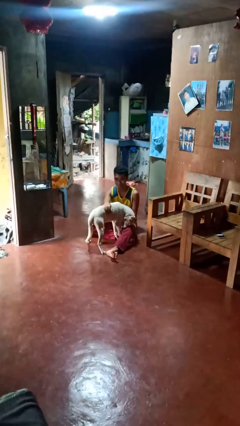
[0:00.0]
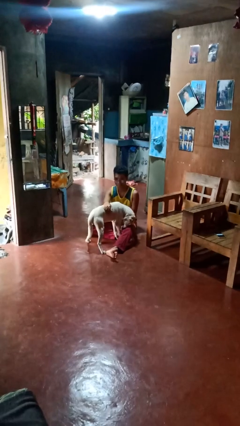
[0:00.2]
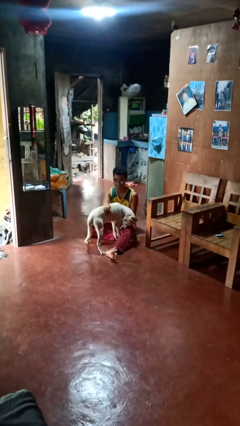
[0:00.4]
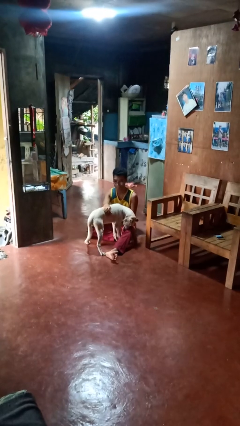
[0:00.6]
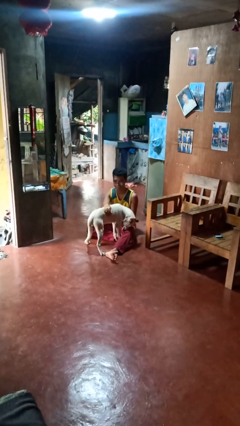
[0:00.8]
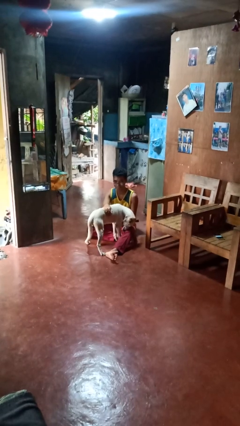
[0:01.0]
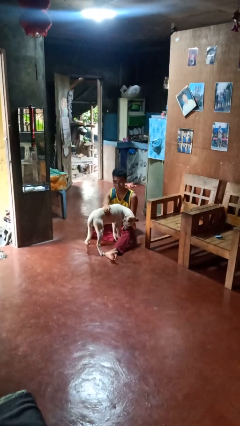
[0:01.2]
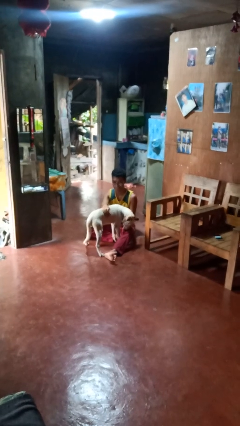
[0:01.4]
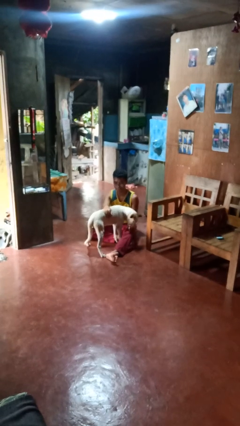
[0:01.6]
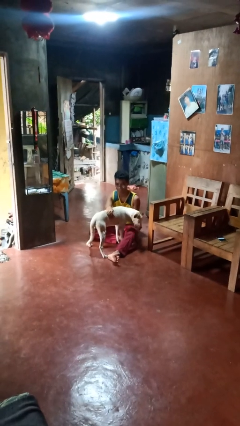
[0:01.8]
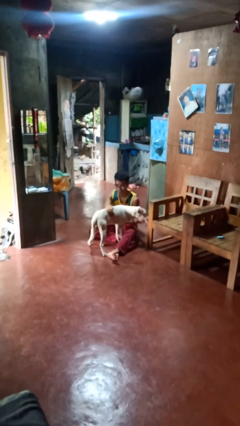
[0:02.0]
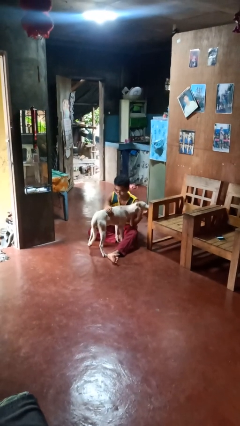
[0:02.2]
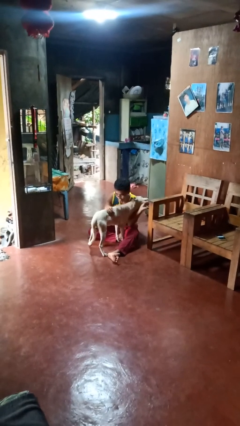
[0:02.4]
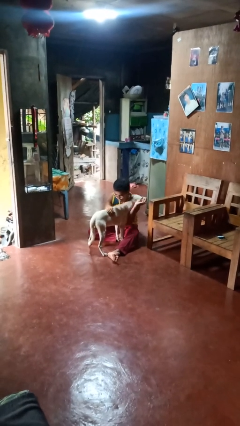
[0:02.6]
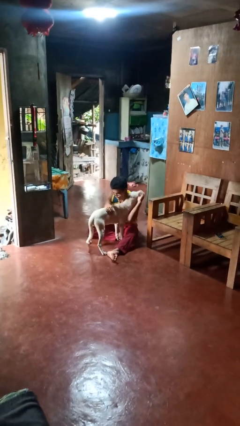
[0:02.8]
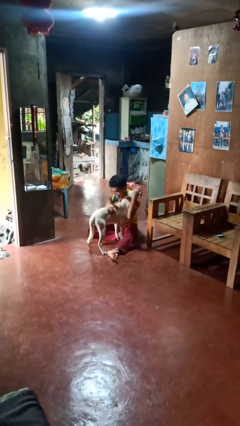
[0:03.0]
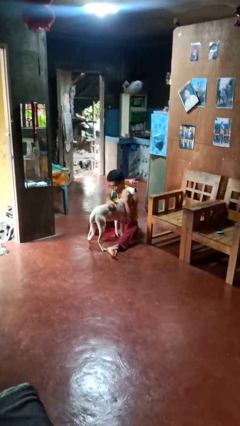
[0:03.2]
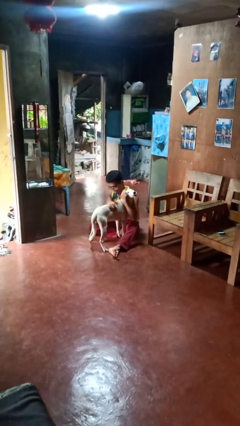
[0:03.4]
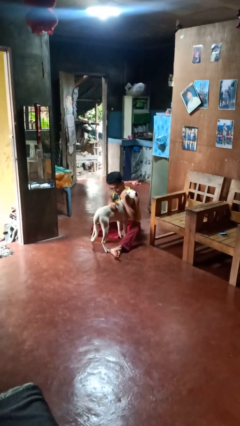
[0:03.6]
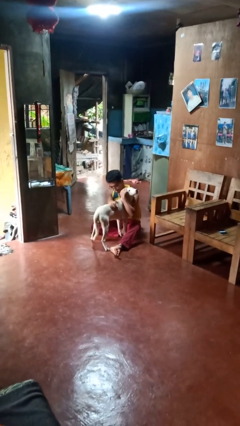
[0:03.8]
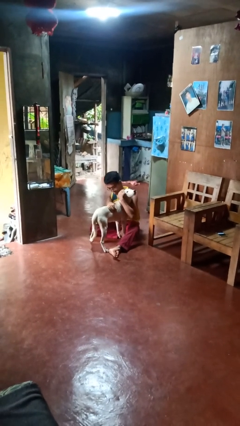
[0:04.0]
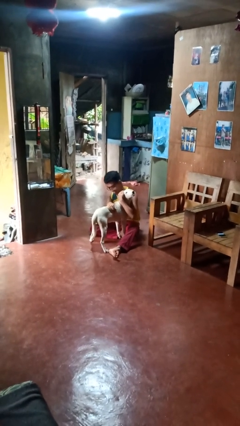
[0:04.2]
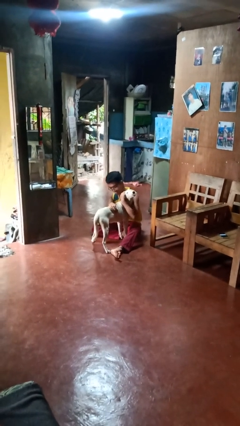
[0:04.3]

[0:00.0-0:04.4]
person hugs dog

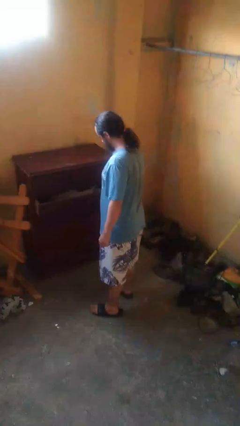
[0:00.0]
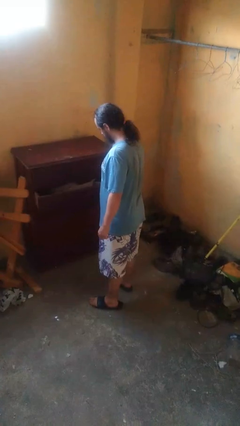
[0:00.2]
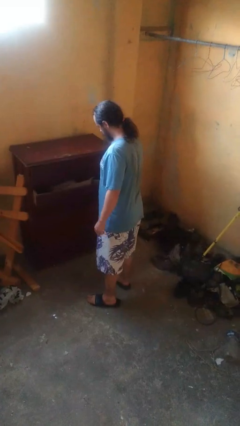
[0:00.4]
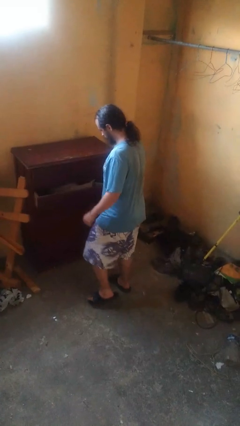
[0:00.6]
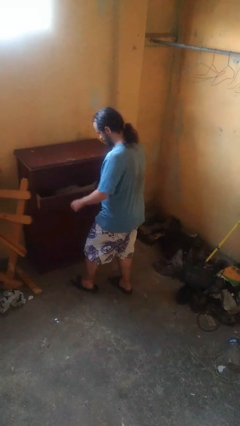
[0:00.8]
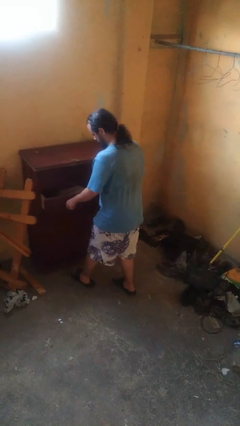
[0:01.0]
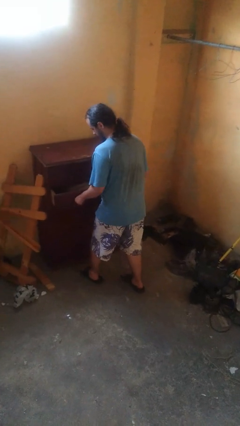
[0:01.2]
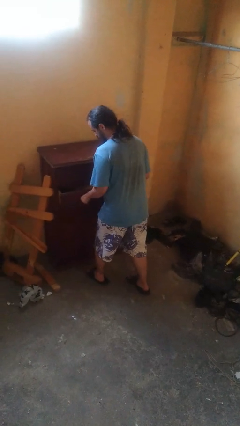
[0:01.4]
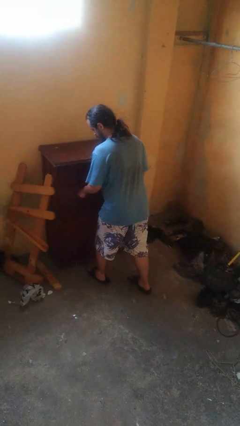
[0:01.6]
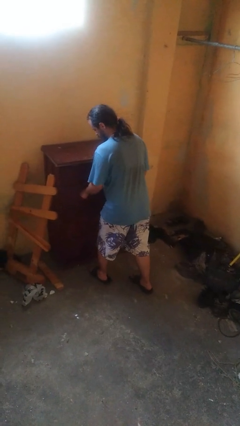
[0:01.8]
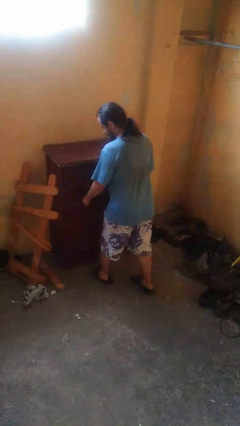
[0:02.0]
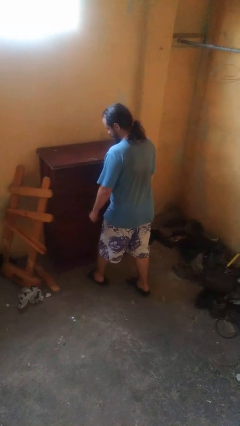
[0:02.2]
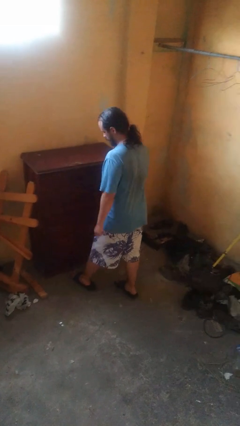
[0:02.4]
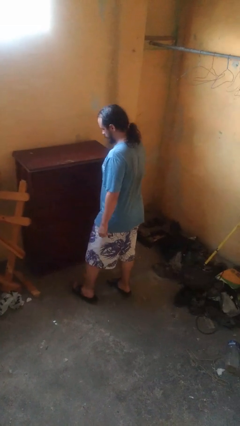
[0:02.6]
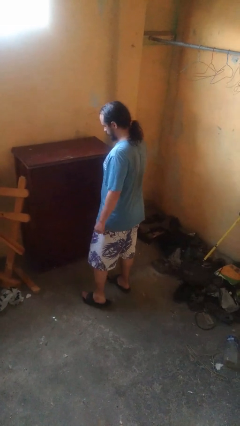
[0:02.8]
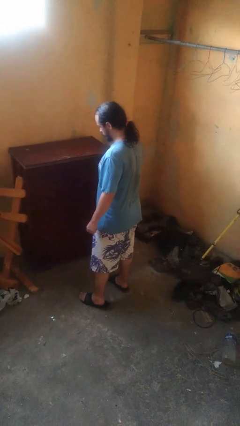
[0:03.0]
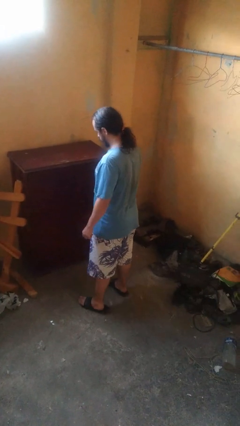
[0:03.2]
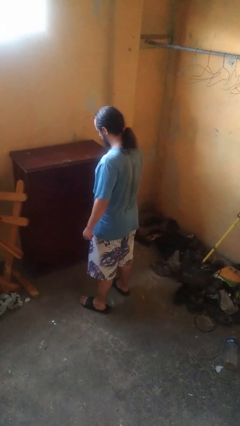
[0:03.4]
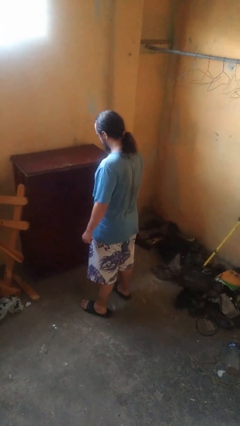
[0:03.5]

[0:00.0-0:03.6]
person closes dresser drawer

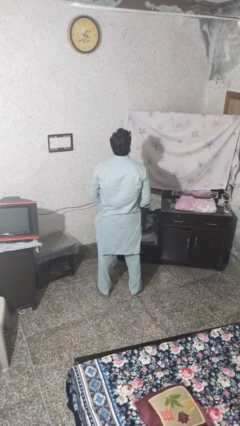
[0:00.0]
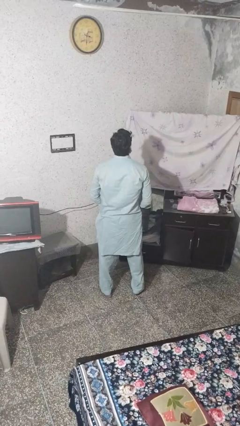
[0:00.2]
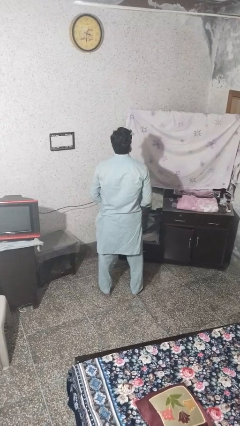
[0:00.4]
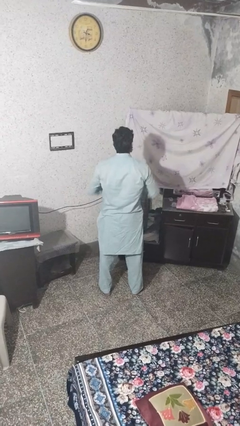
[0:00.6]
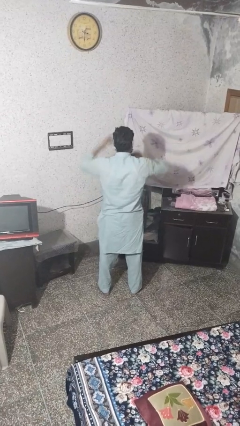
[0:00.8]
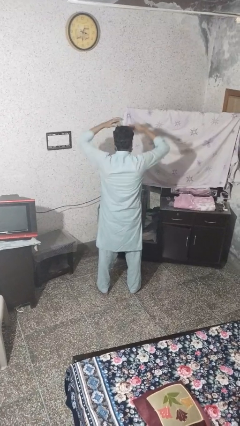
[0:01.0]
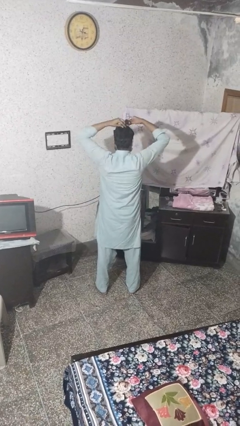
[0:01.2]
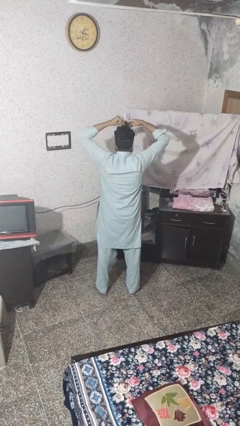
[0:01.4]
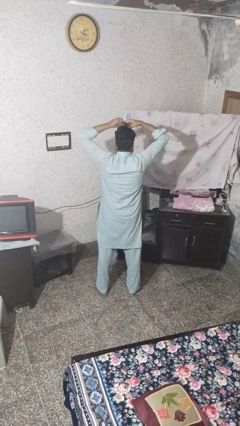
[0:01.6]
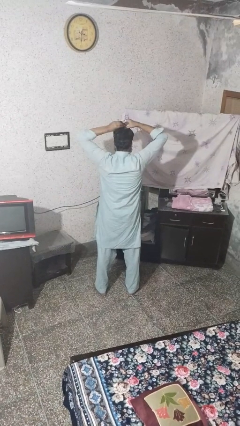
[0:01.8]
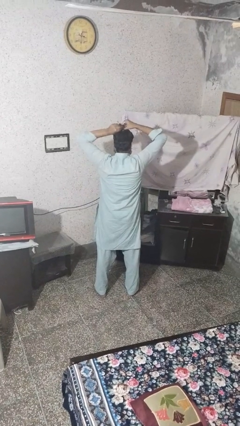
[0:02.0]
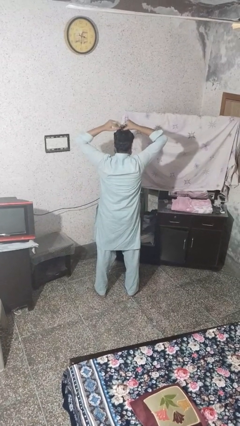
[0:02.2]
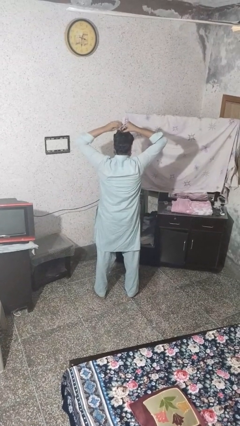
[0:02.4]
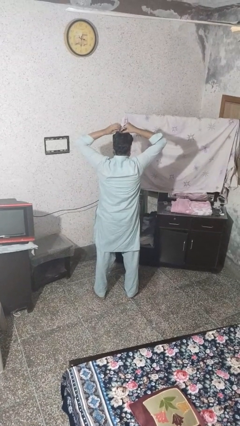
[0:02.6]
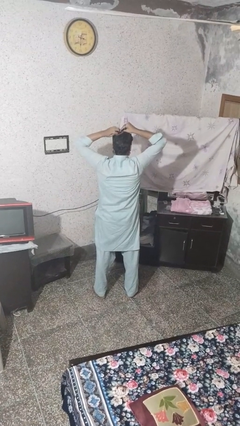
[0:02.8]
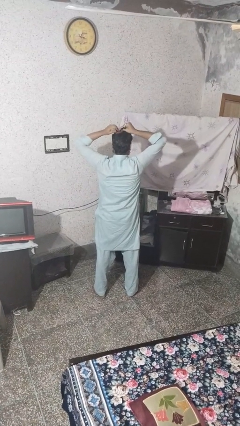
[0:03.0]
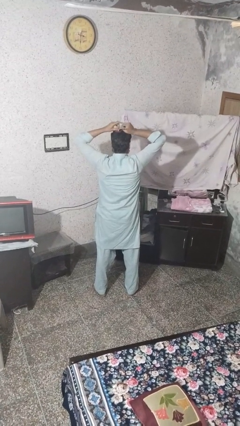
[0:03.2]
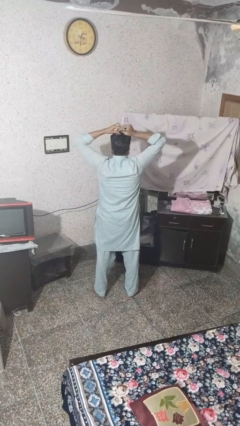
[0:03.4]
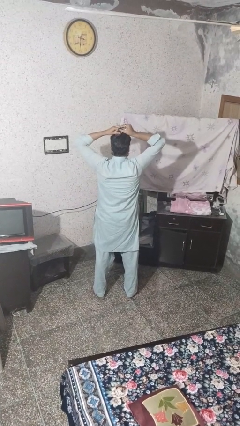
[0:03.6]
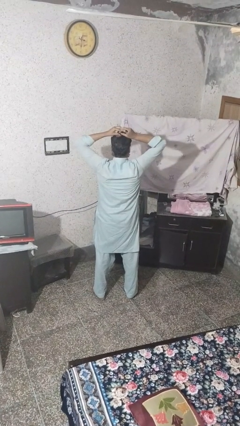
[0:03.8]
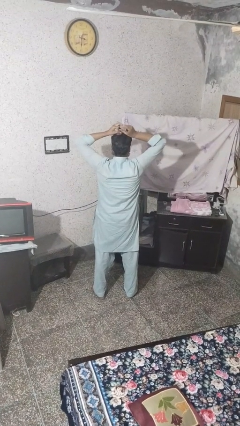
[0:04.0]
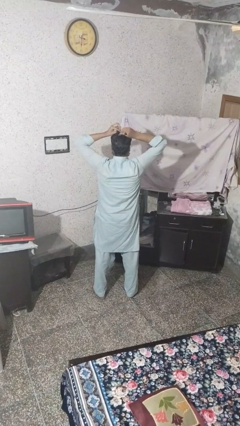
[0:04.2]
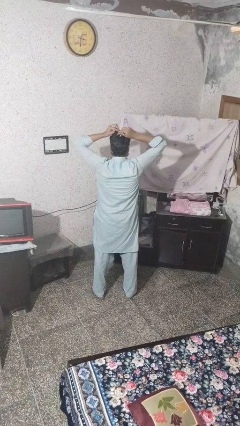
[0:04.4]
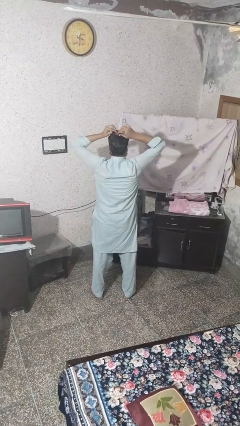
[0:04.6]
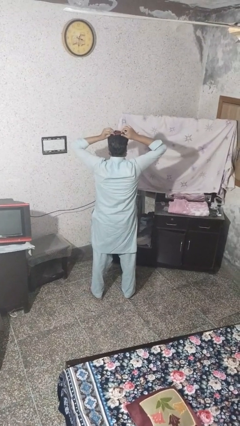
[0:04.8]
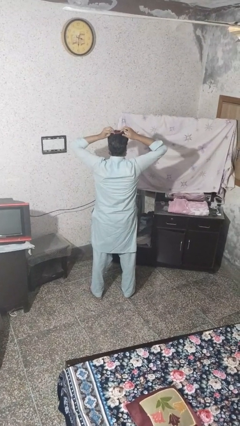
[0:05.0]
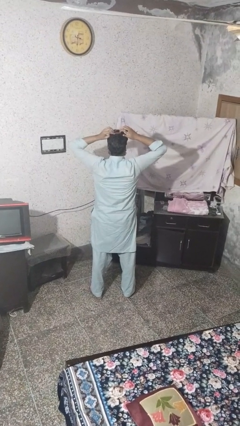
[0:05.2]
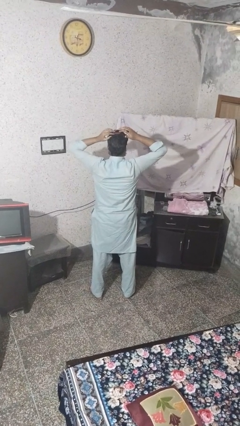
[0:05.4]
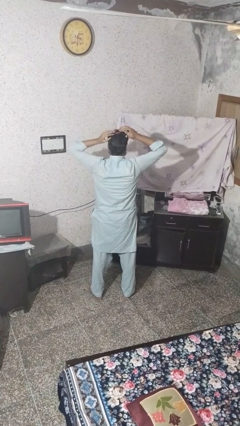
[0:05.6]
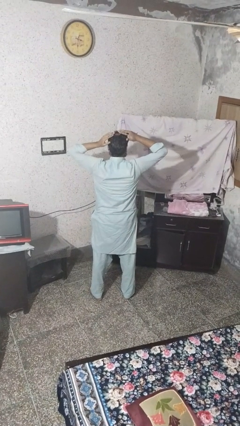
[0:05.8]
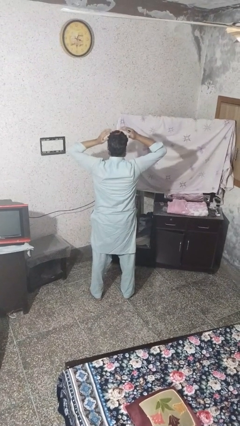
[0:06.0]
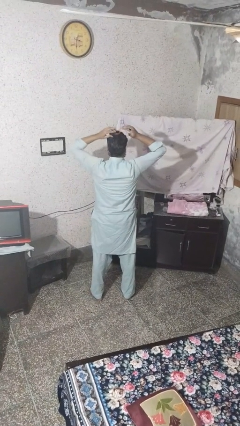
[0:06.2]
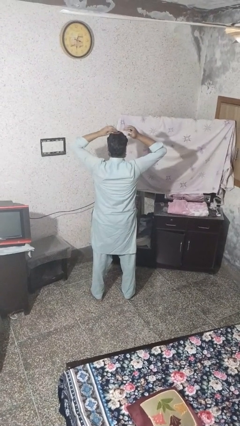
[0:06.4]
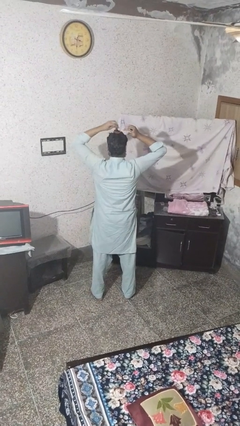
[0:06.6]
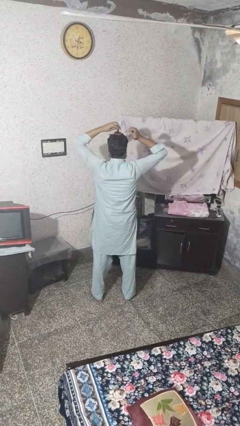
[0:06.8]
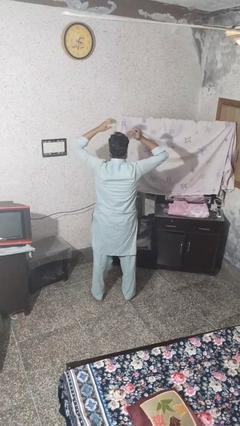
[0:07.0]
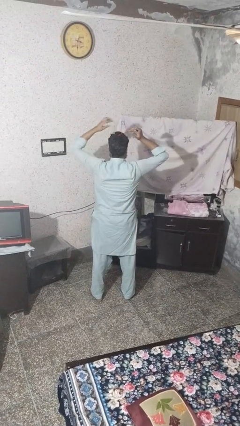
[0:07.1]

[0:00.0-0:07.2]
person puts hair in ponytail

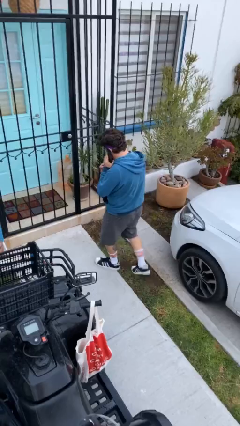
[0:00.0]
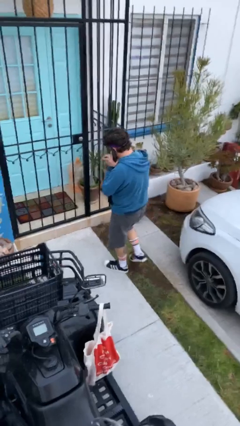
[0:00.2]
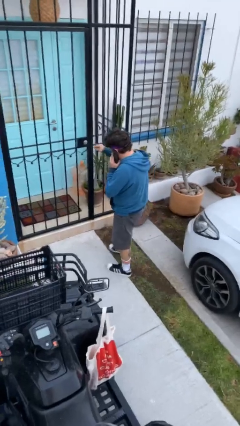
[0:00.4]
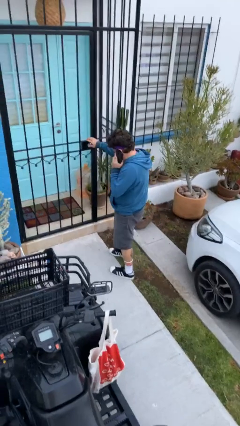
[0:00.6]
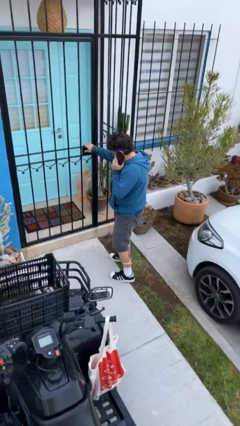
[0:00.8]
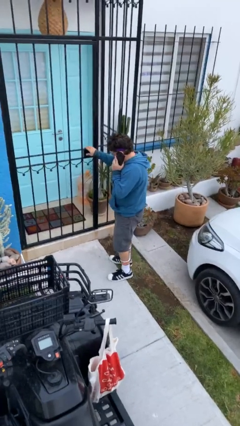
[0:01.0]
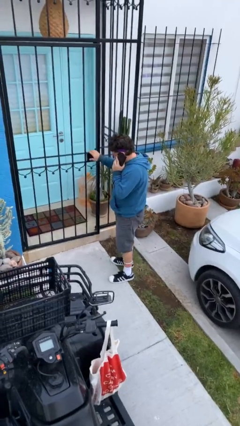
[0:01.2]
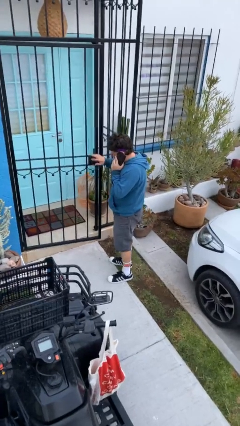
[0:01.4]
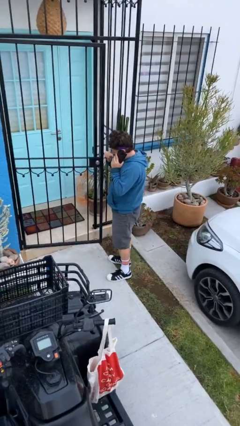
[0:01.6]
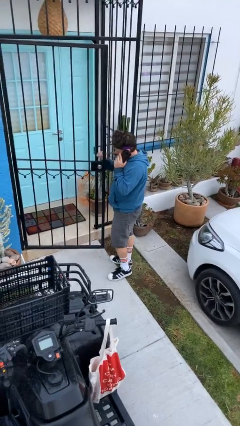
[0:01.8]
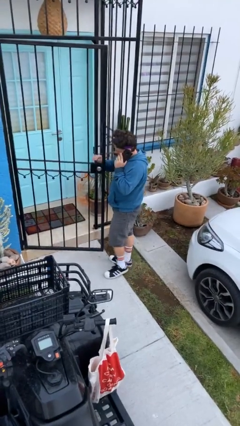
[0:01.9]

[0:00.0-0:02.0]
person opens facility door

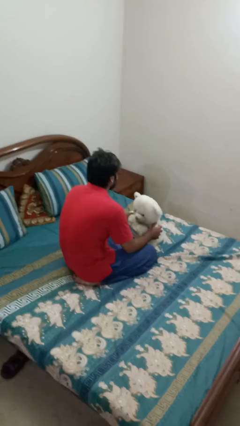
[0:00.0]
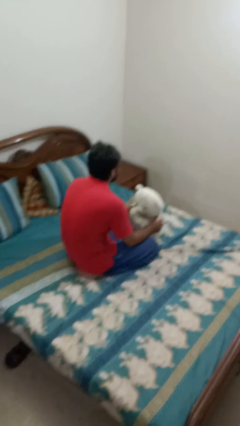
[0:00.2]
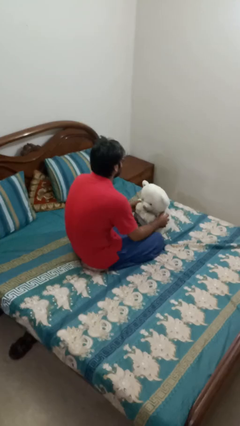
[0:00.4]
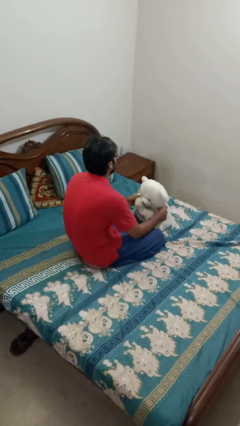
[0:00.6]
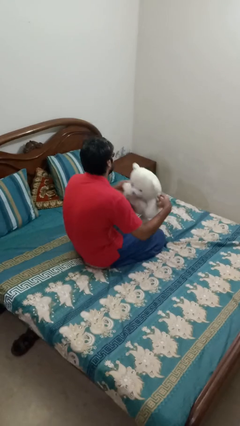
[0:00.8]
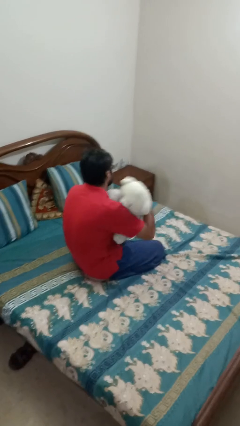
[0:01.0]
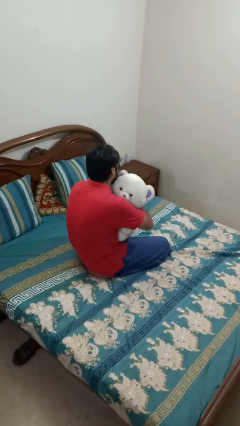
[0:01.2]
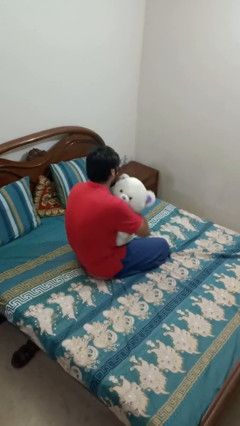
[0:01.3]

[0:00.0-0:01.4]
person hugs stuffed animal
